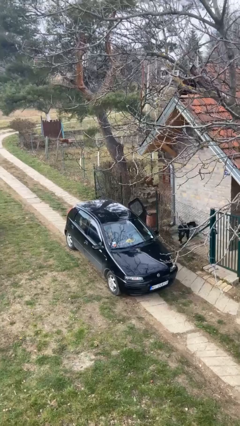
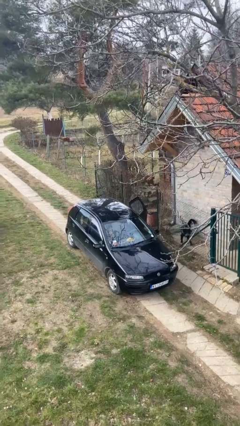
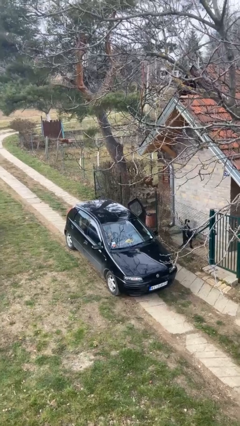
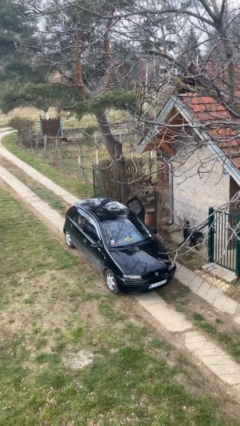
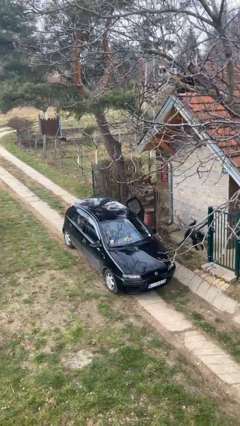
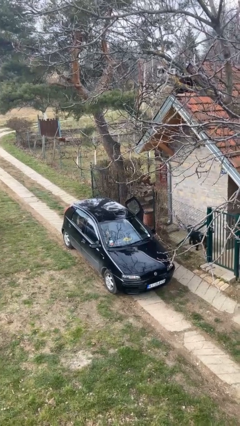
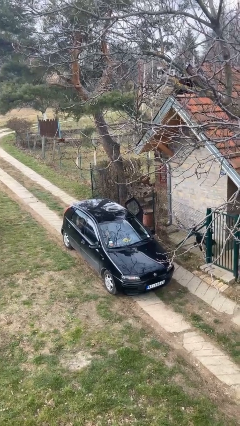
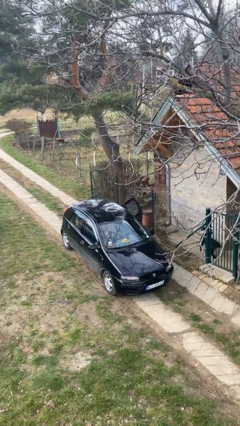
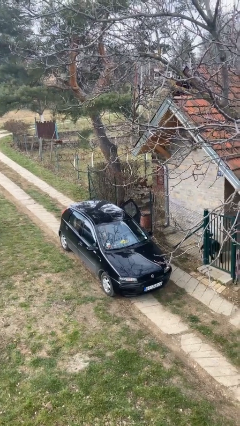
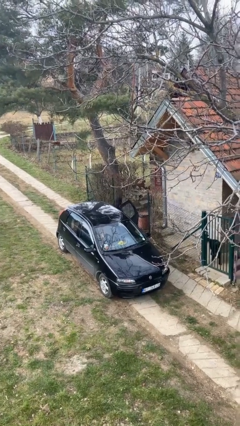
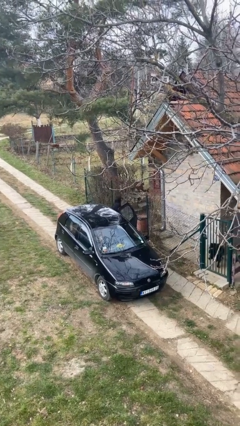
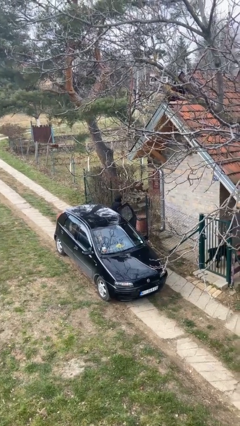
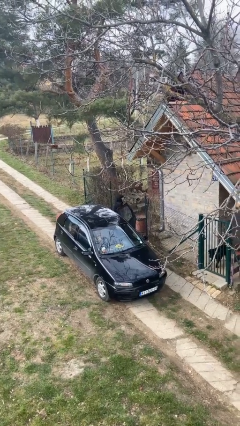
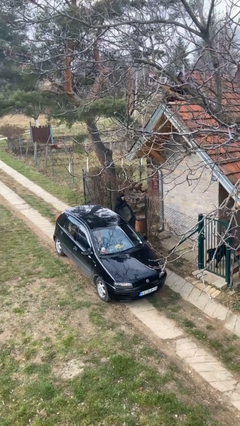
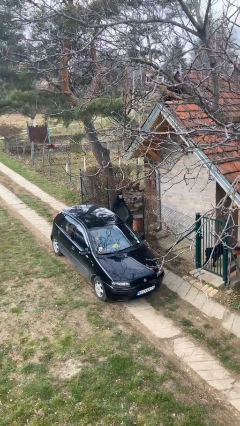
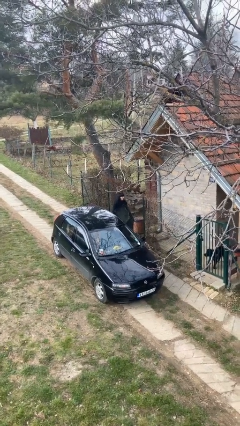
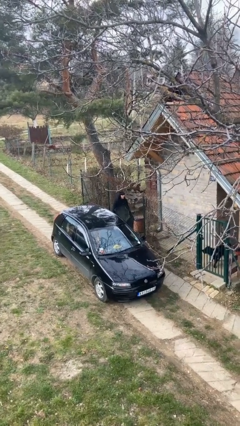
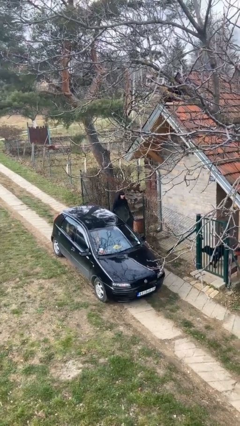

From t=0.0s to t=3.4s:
person exits car

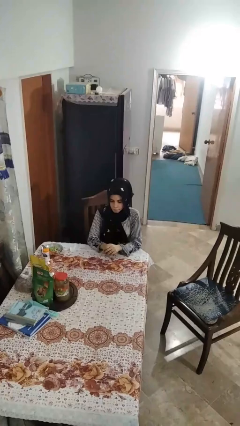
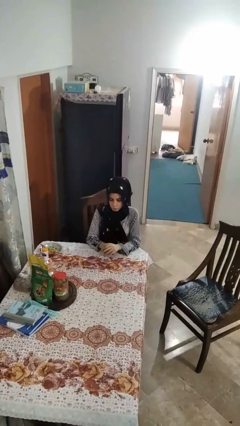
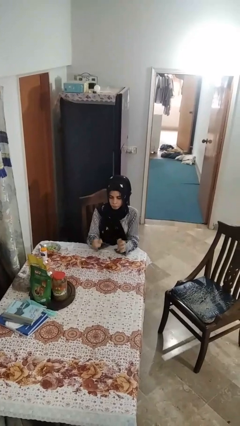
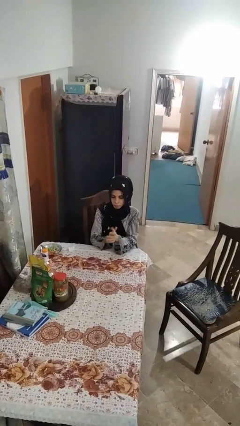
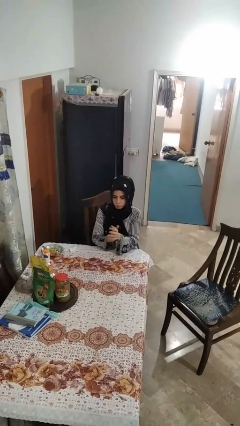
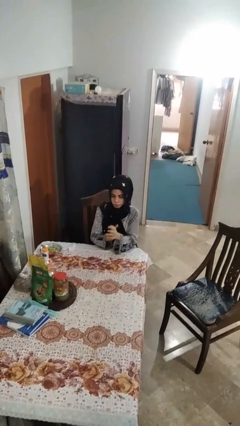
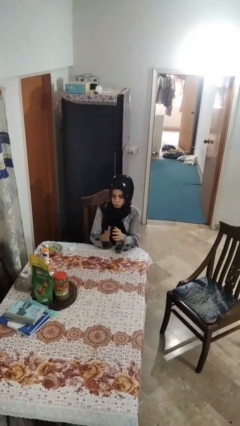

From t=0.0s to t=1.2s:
person claps hands

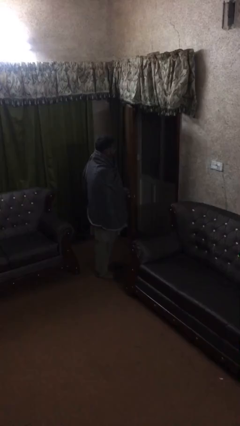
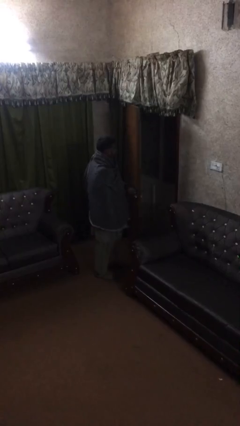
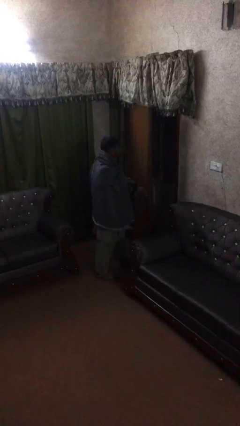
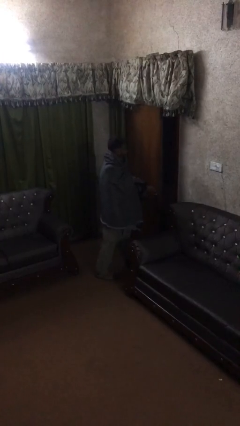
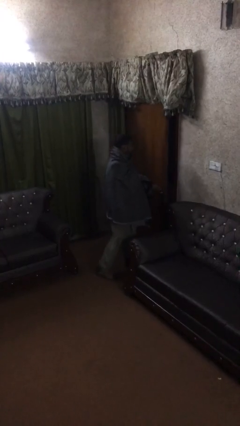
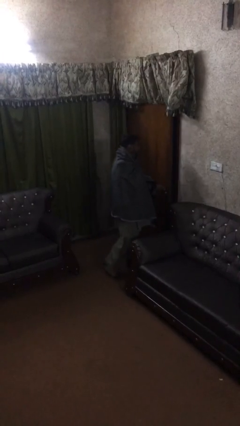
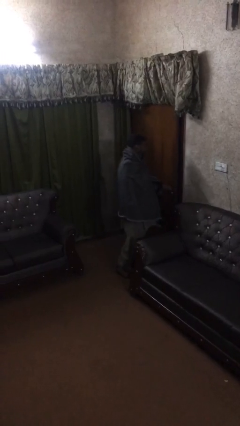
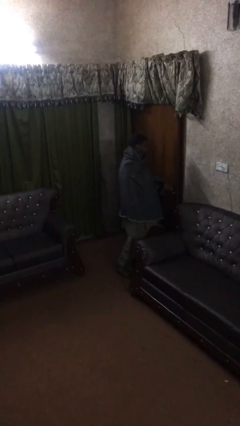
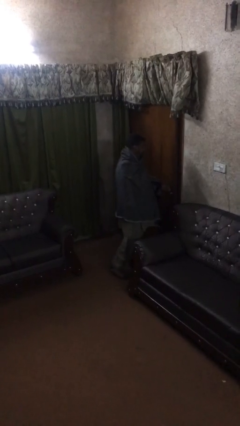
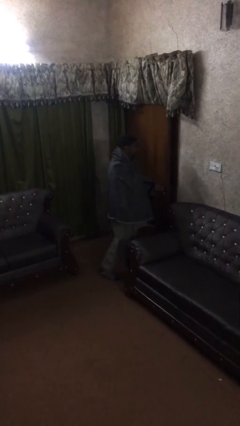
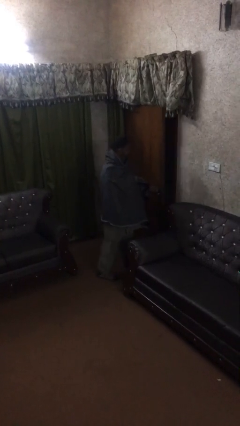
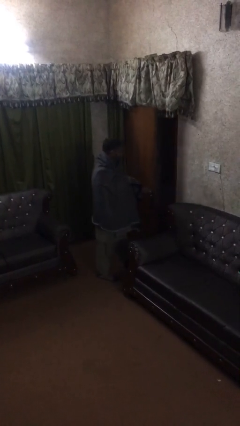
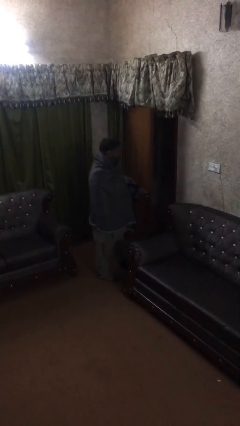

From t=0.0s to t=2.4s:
person closes facility door

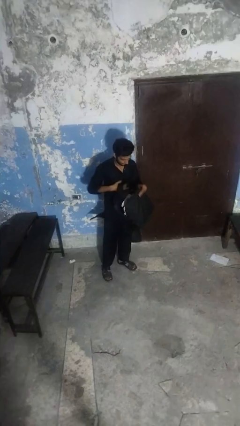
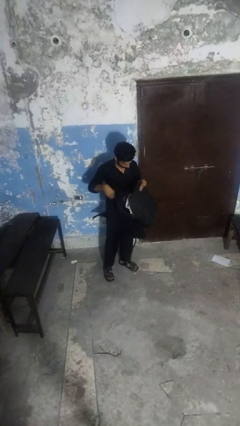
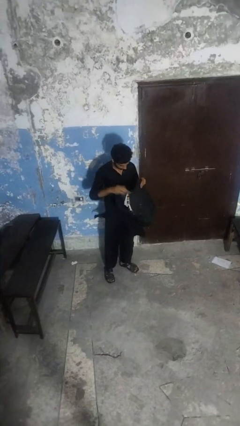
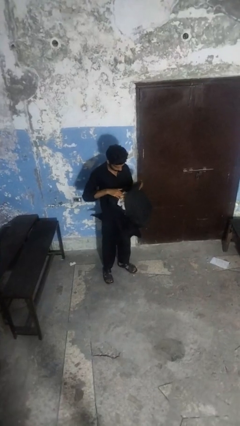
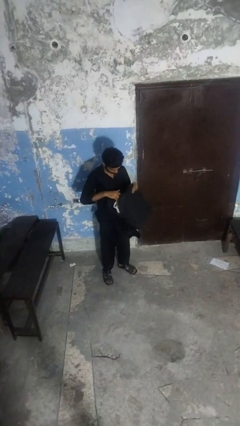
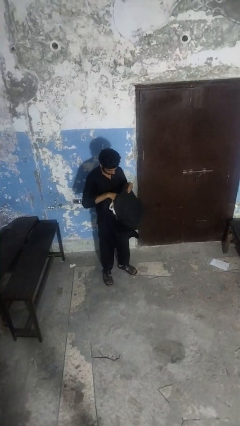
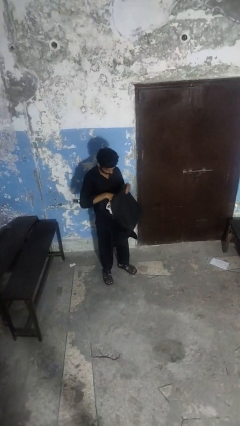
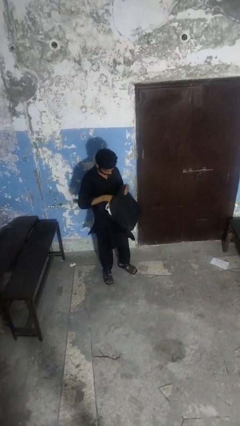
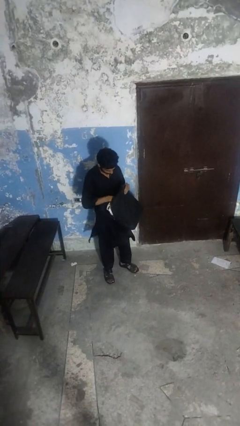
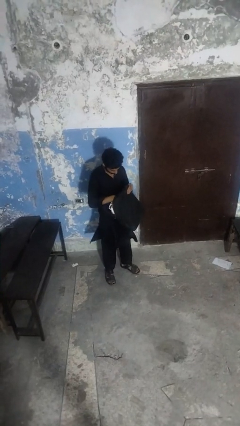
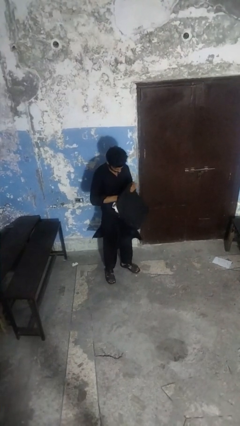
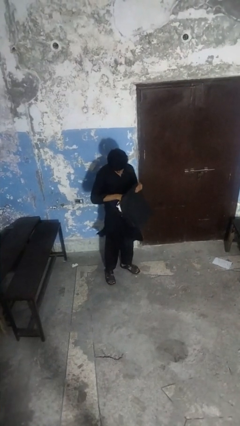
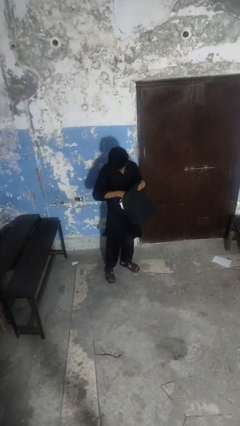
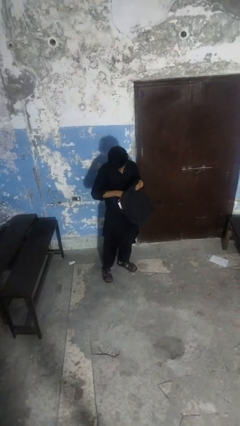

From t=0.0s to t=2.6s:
person searches in backpack

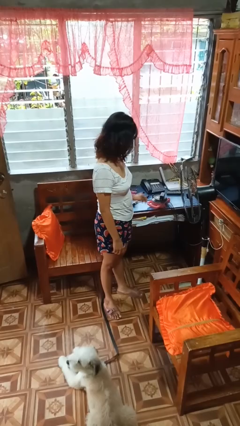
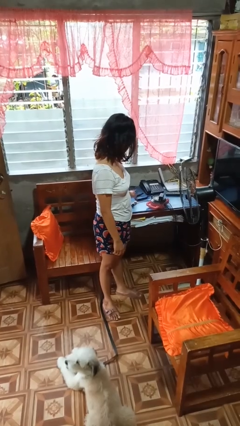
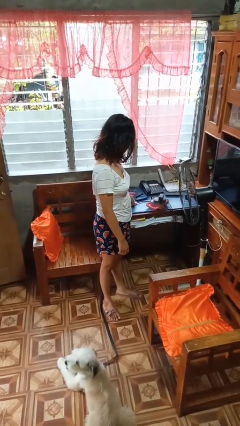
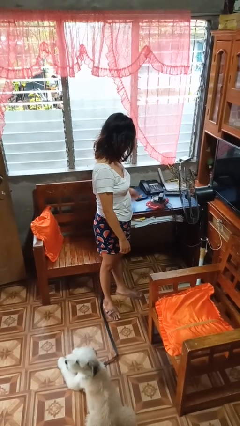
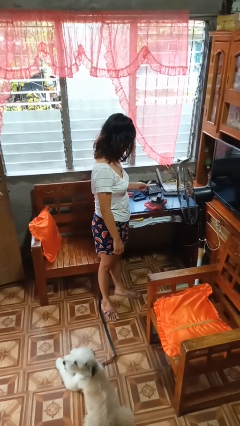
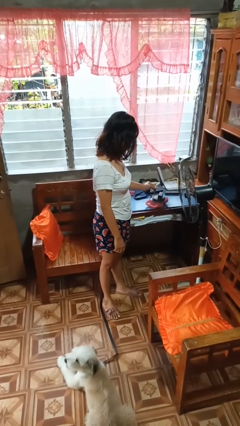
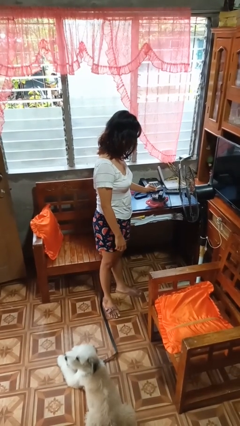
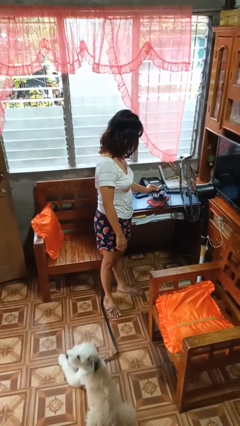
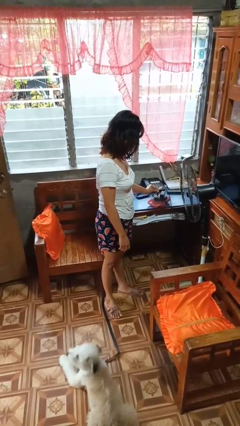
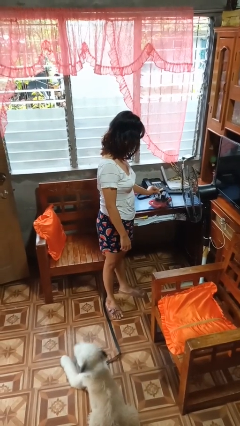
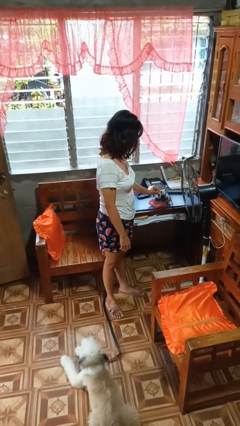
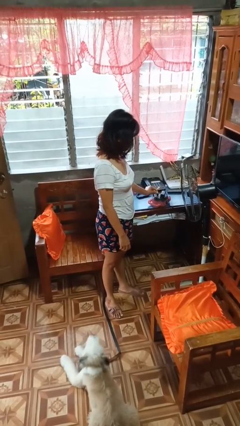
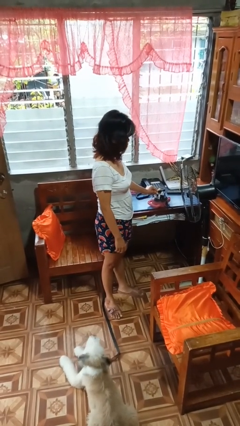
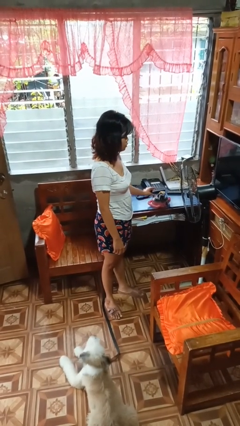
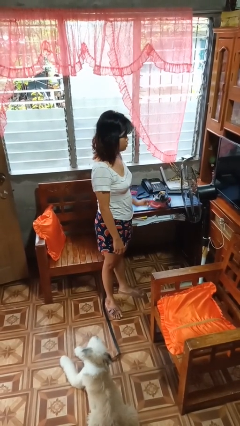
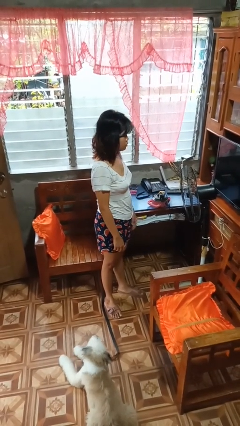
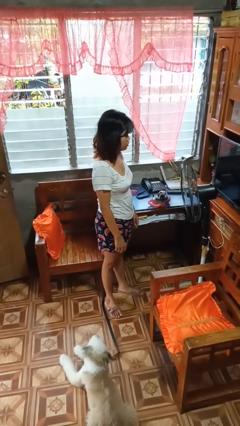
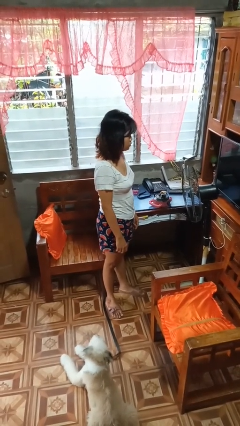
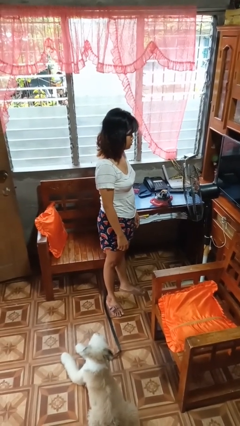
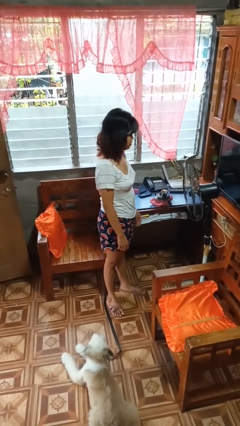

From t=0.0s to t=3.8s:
person plugs into electrical socket

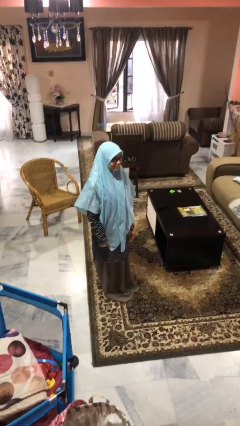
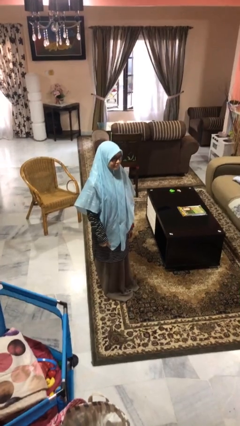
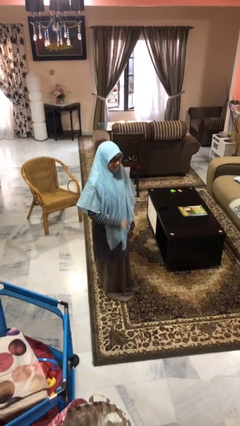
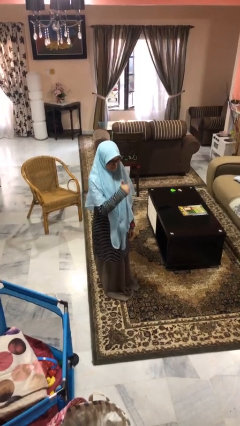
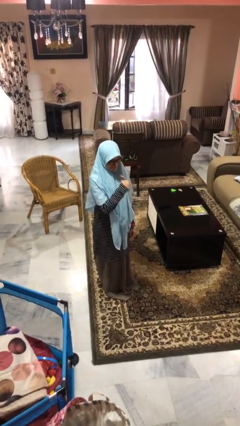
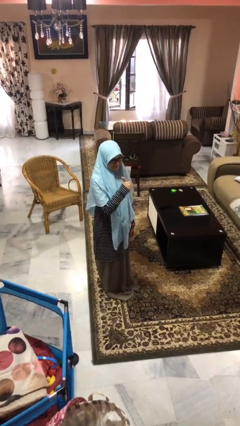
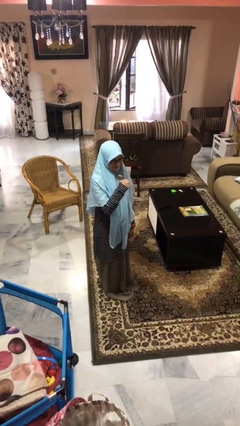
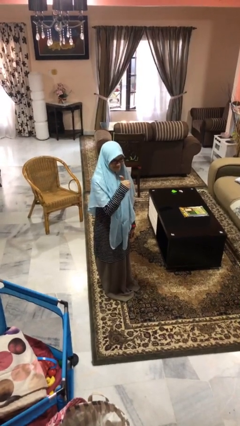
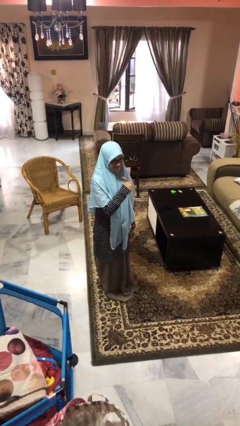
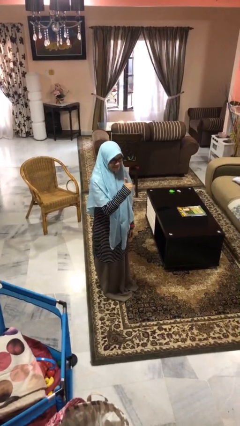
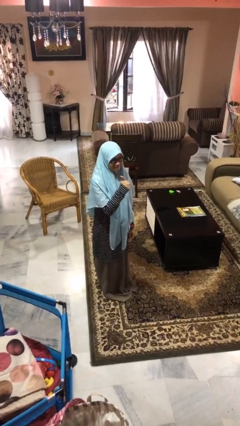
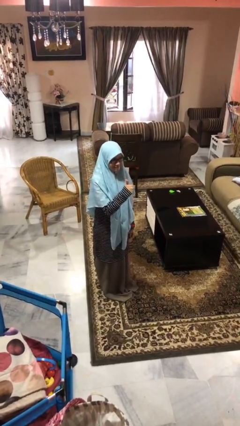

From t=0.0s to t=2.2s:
person gestures thumbs up

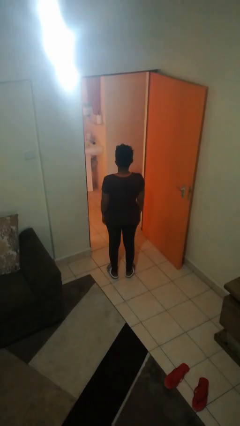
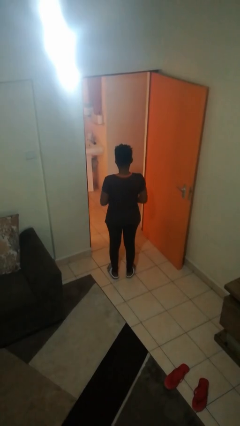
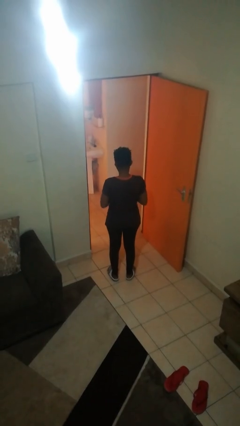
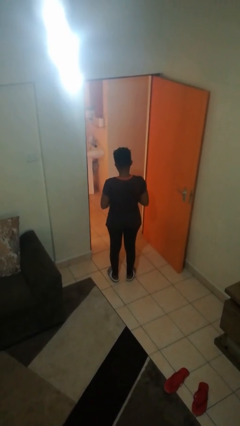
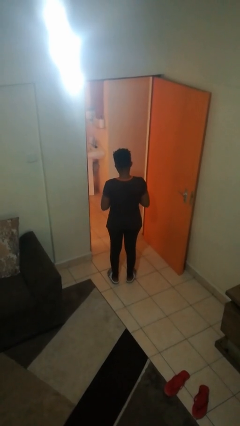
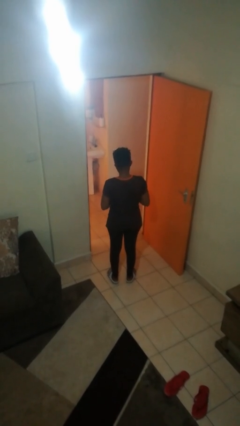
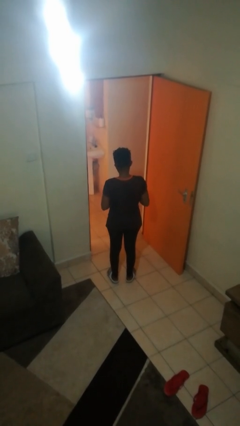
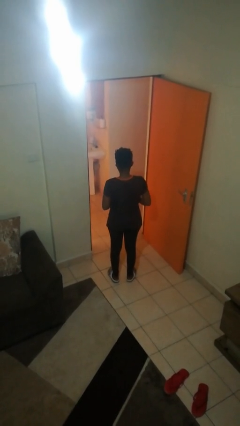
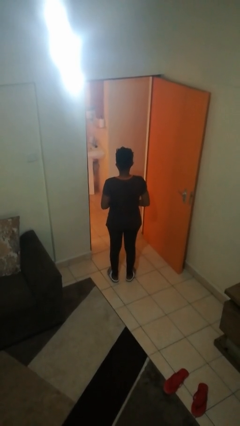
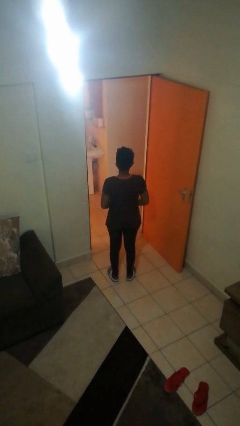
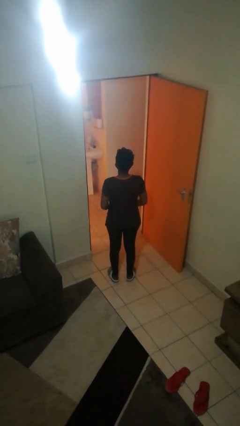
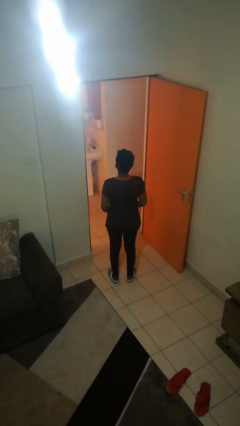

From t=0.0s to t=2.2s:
person takes off ring
